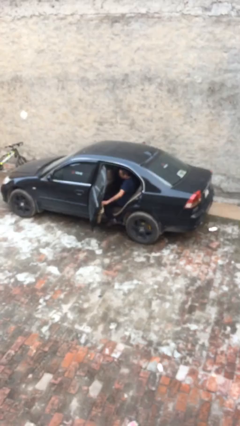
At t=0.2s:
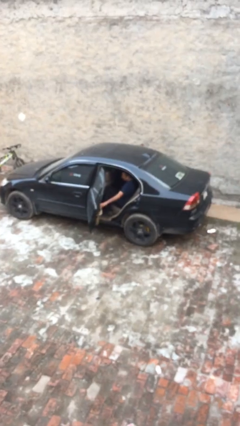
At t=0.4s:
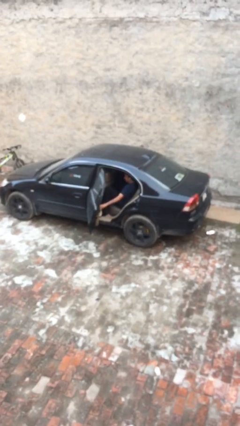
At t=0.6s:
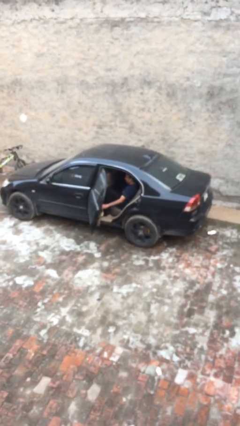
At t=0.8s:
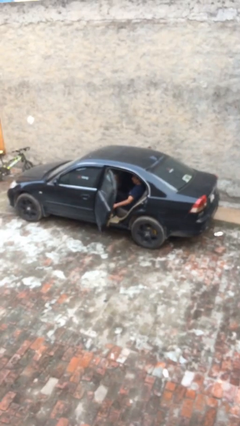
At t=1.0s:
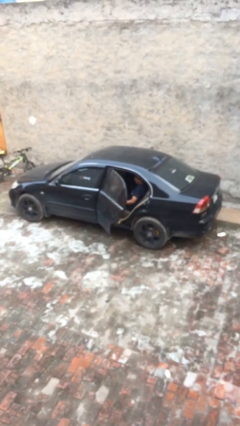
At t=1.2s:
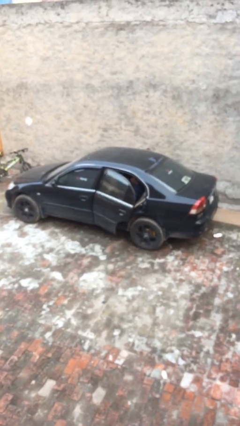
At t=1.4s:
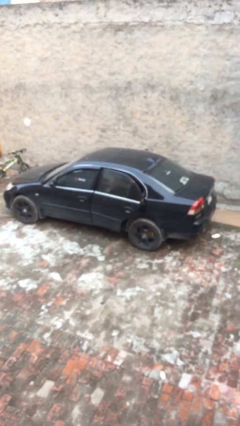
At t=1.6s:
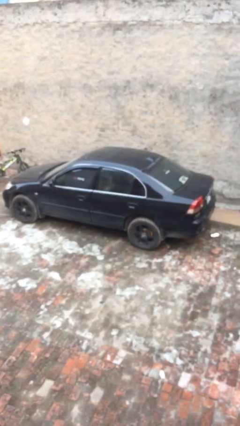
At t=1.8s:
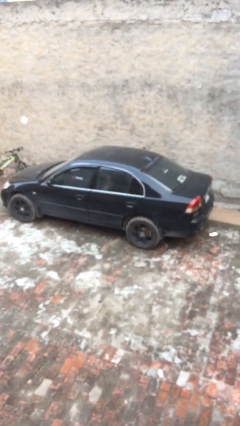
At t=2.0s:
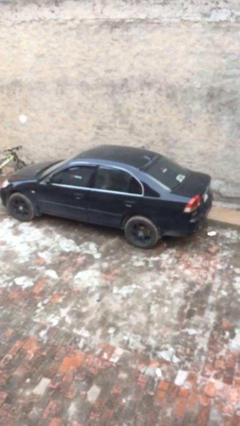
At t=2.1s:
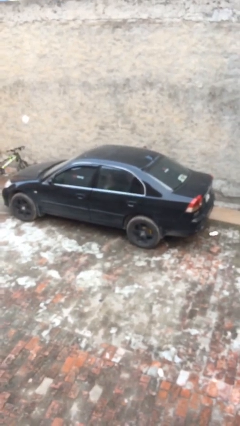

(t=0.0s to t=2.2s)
person closes car door

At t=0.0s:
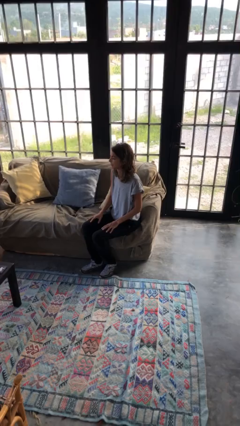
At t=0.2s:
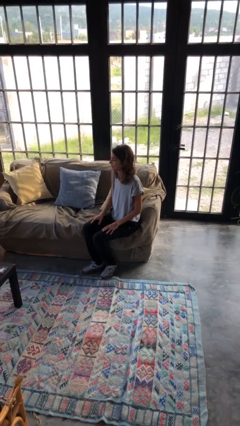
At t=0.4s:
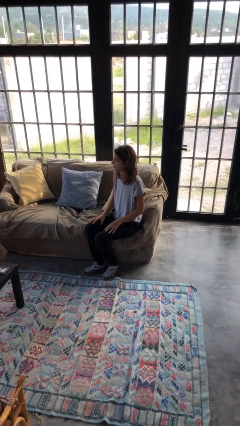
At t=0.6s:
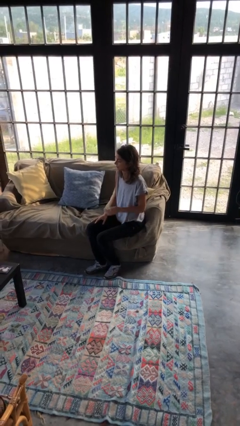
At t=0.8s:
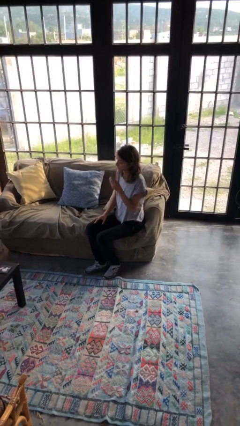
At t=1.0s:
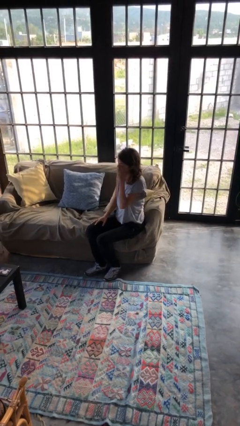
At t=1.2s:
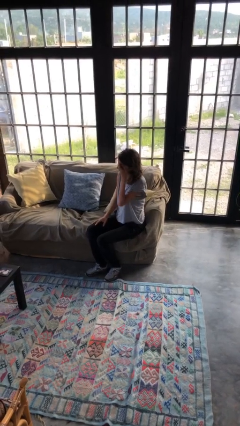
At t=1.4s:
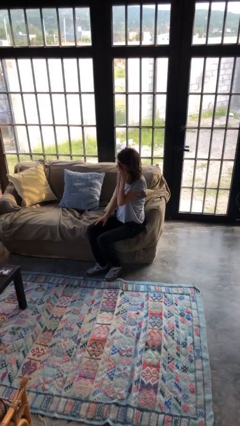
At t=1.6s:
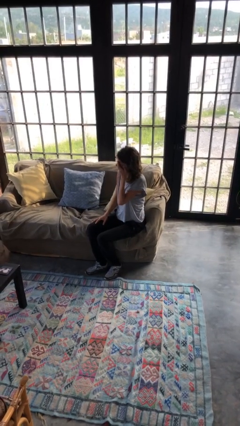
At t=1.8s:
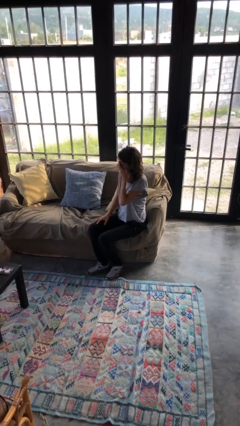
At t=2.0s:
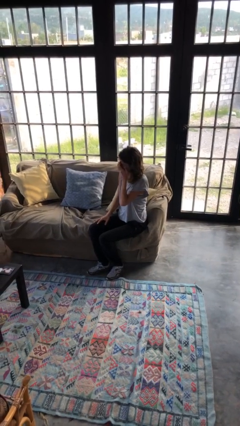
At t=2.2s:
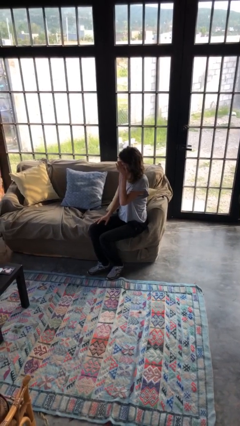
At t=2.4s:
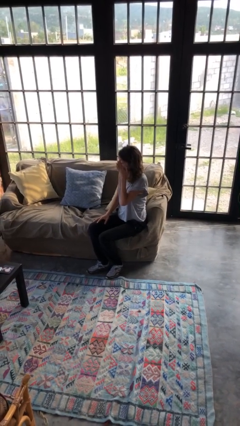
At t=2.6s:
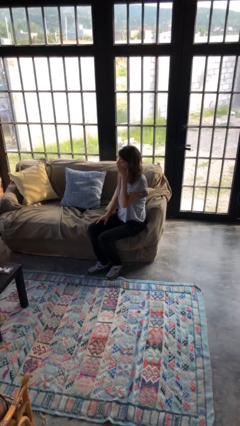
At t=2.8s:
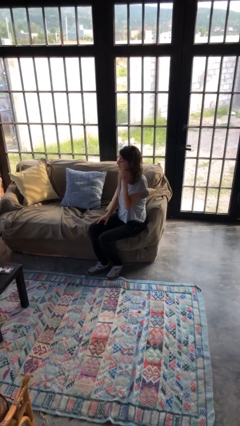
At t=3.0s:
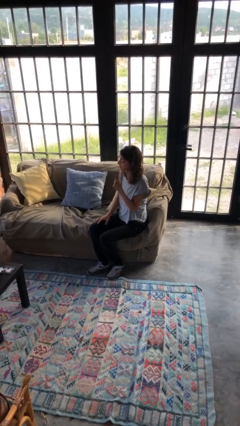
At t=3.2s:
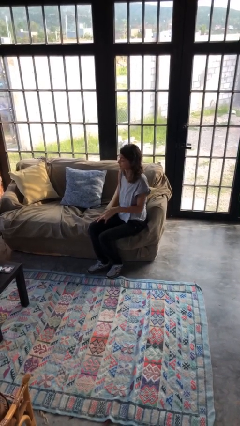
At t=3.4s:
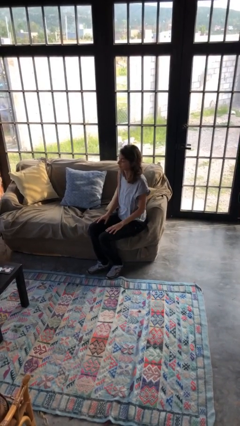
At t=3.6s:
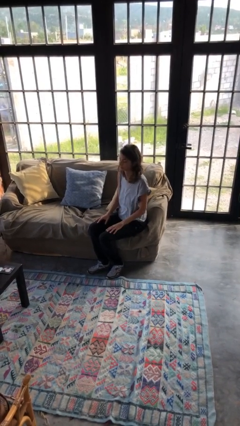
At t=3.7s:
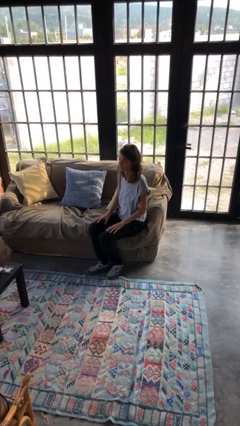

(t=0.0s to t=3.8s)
person scratches face

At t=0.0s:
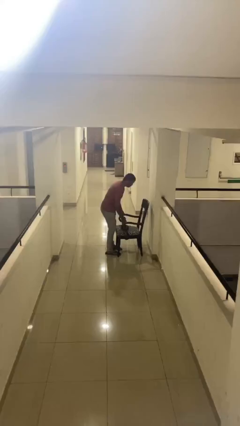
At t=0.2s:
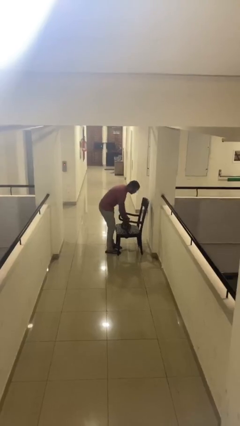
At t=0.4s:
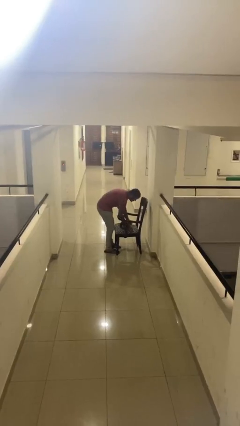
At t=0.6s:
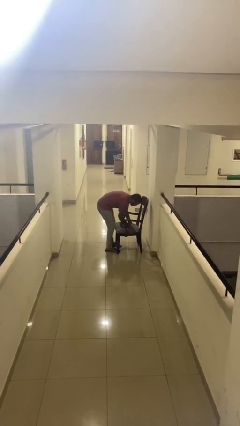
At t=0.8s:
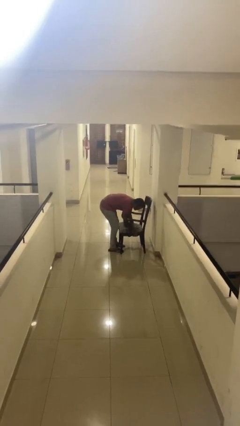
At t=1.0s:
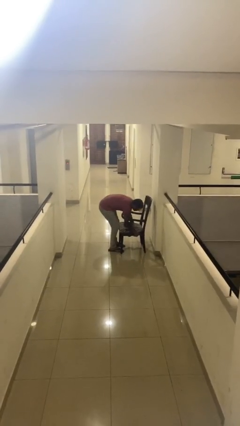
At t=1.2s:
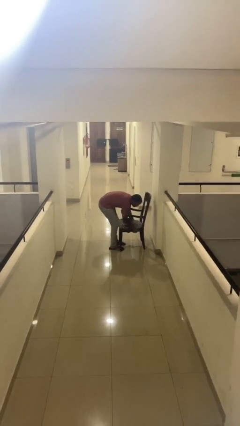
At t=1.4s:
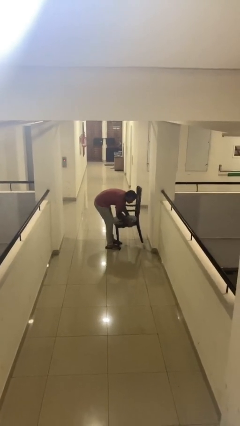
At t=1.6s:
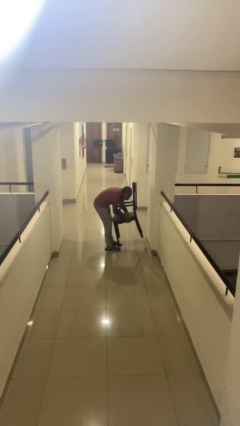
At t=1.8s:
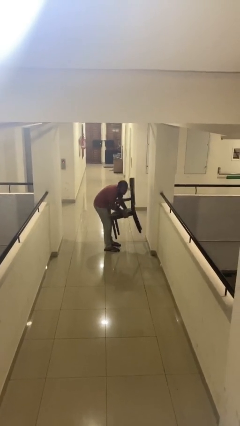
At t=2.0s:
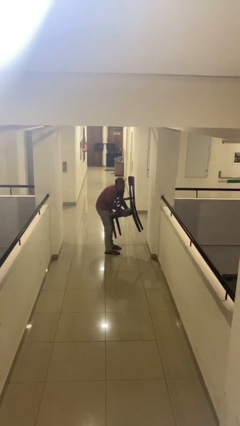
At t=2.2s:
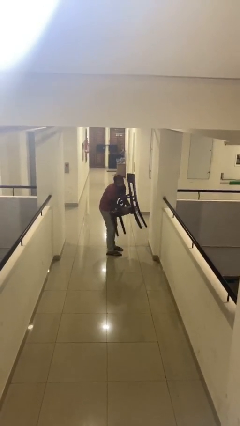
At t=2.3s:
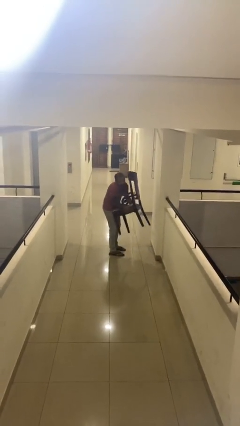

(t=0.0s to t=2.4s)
person picks up object from floor

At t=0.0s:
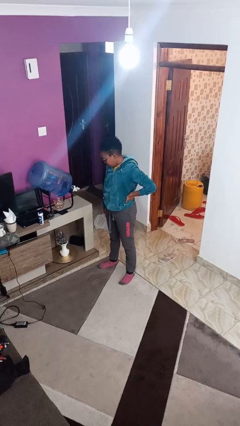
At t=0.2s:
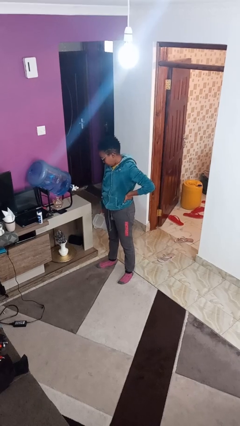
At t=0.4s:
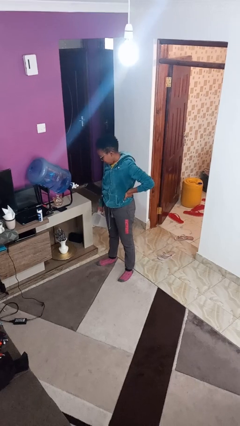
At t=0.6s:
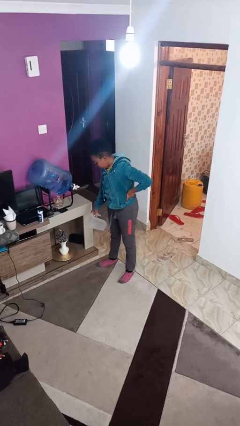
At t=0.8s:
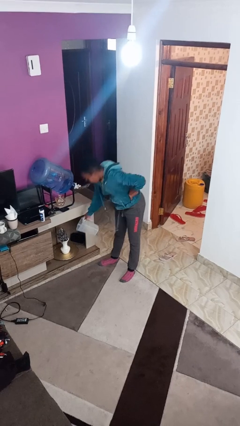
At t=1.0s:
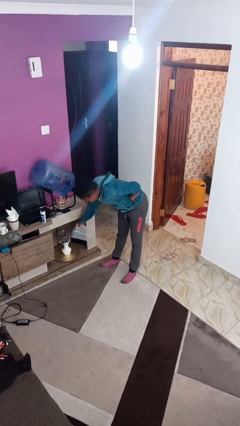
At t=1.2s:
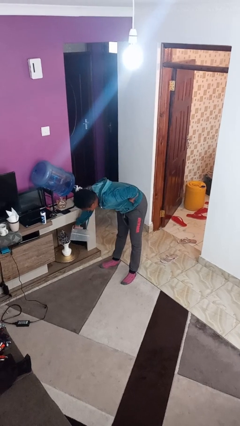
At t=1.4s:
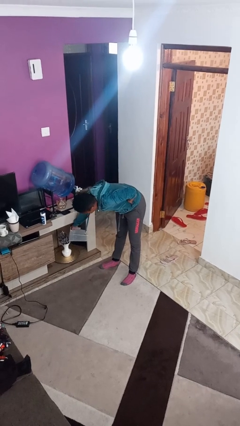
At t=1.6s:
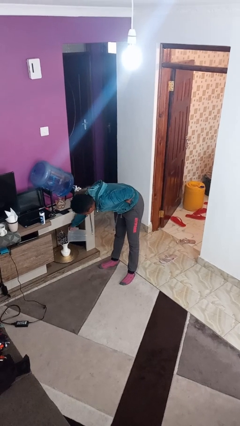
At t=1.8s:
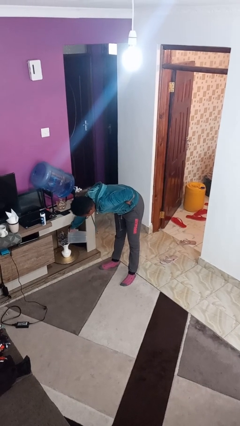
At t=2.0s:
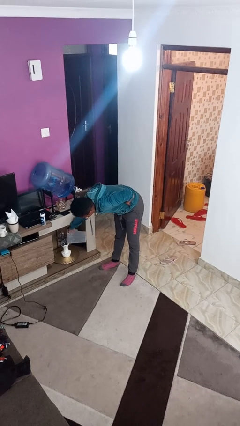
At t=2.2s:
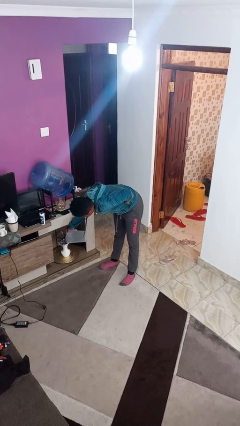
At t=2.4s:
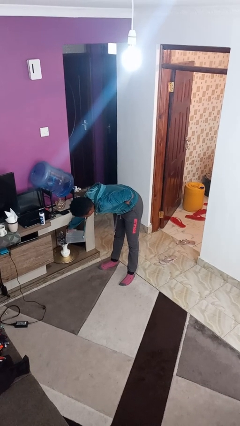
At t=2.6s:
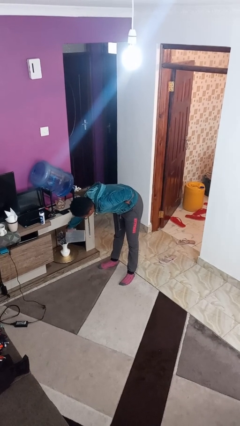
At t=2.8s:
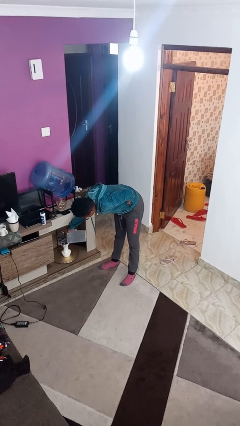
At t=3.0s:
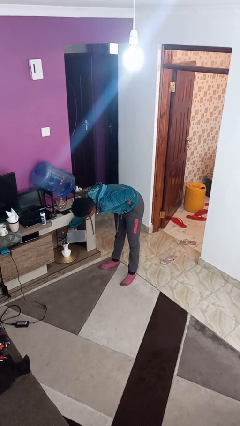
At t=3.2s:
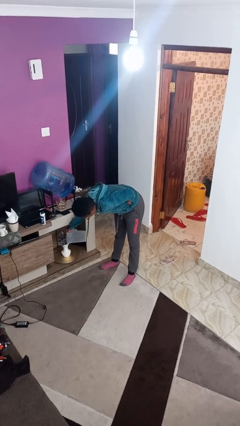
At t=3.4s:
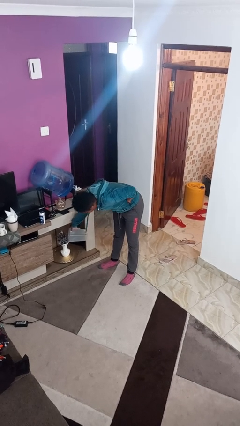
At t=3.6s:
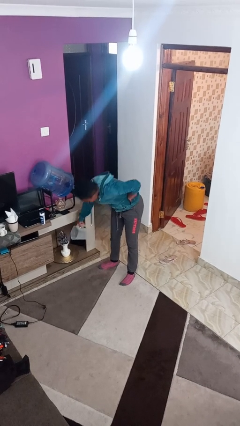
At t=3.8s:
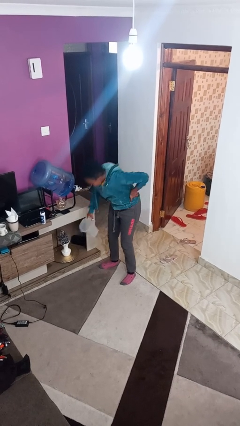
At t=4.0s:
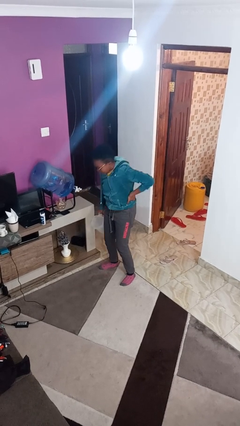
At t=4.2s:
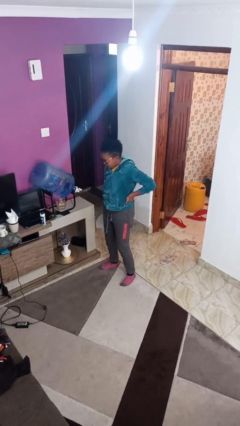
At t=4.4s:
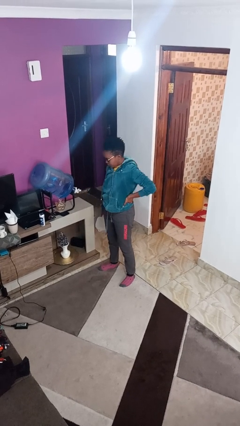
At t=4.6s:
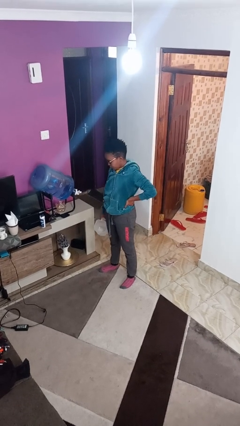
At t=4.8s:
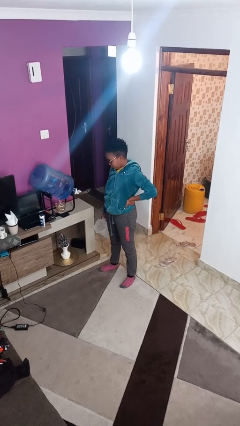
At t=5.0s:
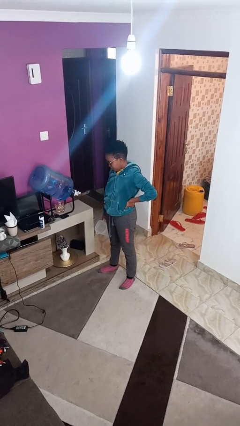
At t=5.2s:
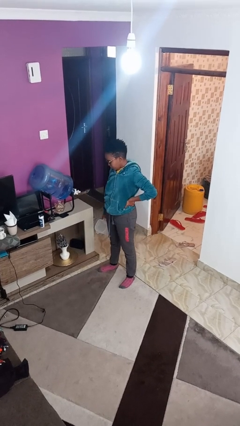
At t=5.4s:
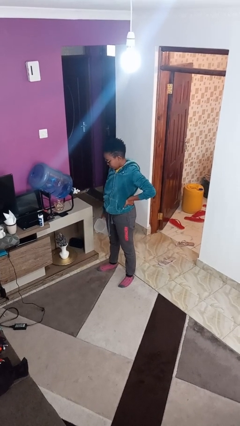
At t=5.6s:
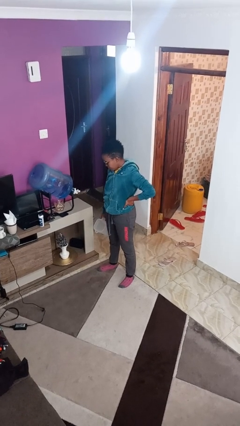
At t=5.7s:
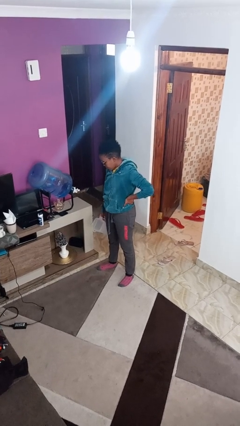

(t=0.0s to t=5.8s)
person waters houseplant

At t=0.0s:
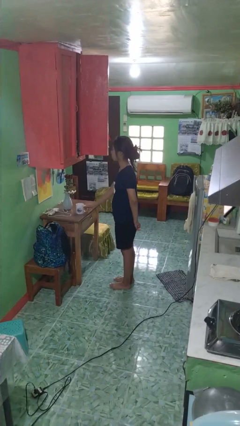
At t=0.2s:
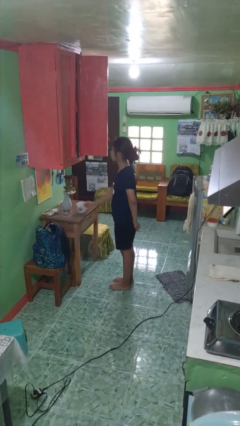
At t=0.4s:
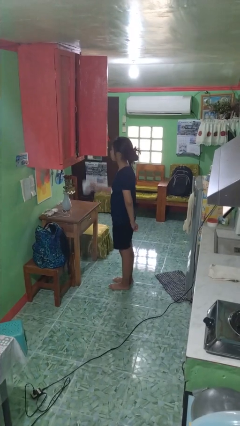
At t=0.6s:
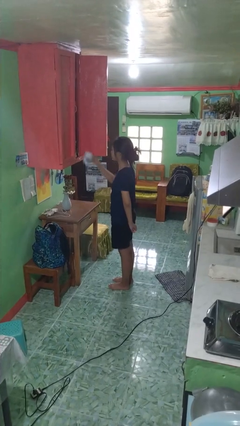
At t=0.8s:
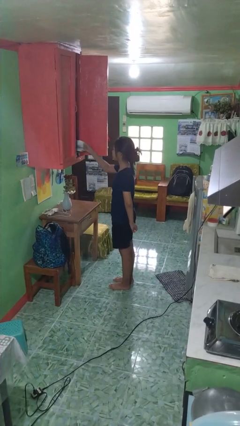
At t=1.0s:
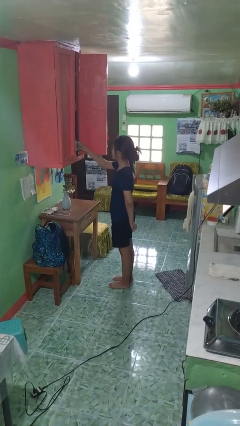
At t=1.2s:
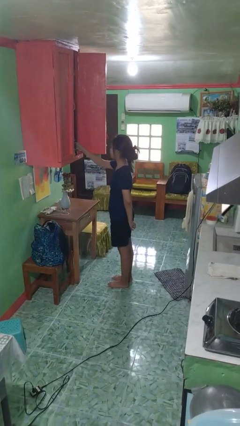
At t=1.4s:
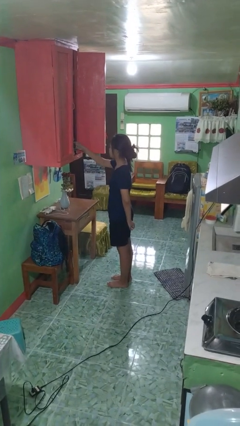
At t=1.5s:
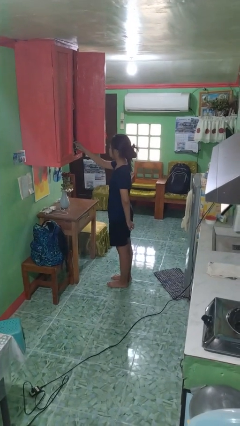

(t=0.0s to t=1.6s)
person puts object in cabinet

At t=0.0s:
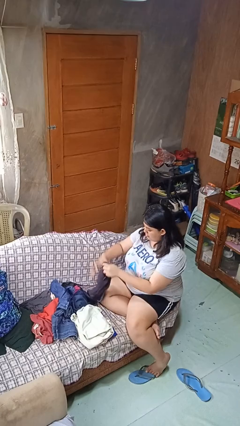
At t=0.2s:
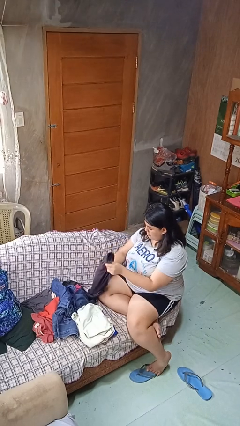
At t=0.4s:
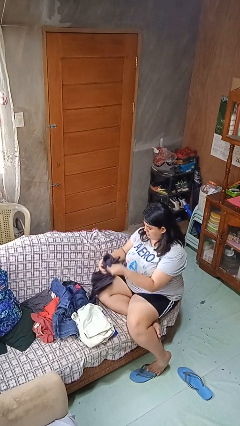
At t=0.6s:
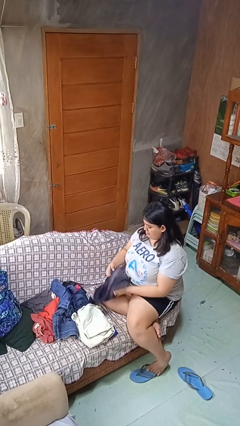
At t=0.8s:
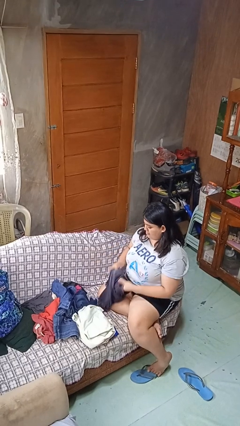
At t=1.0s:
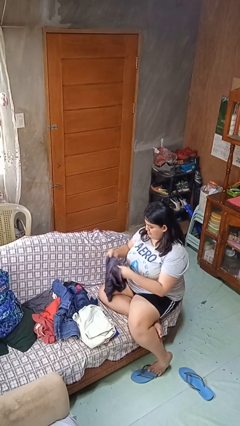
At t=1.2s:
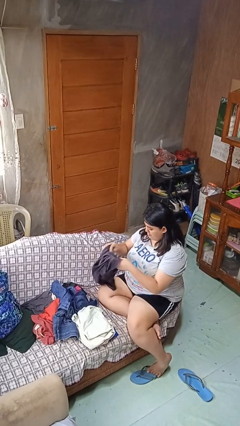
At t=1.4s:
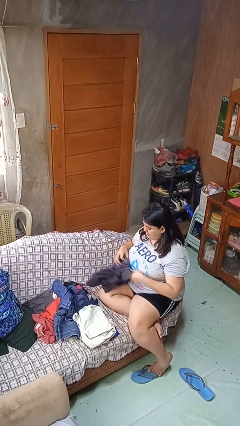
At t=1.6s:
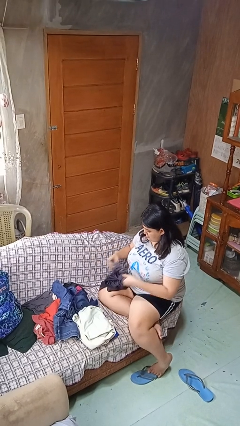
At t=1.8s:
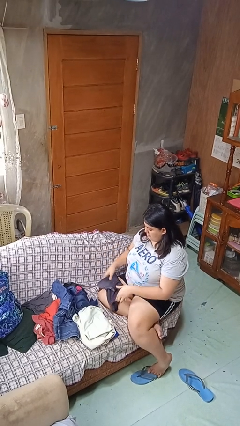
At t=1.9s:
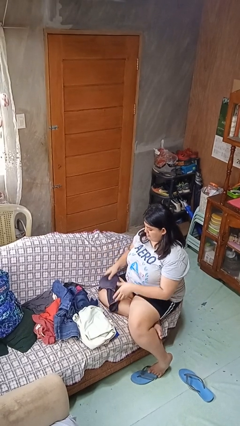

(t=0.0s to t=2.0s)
person folds shirt
